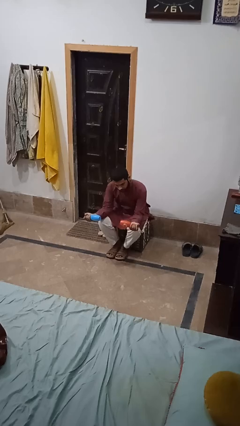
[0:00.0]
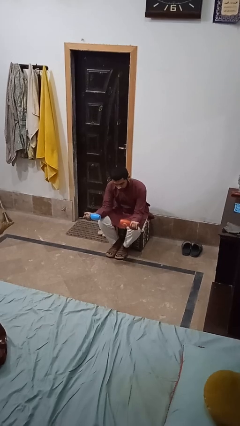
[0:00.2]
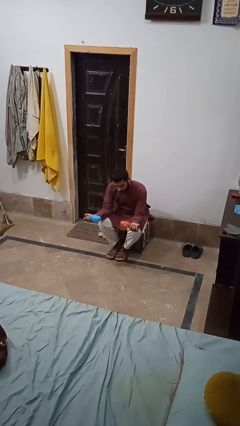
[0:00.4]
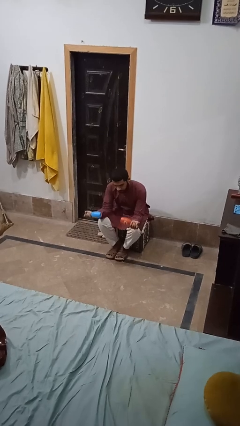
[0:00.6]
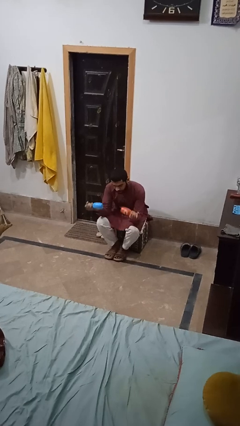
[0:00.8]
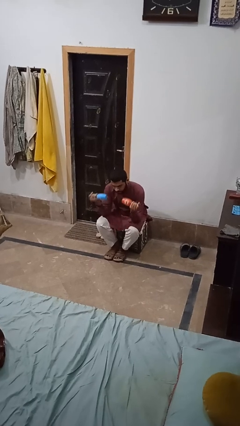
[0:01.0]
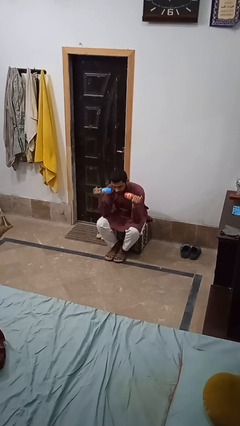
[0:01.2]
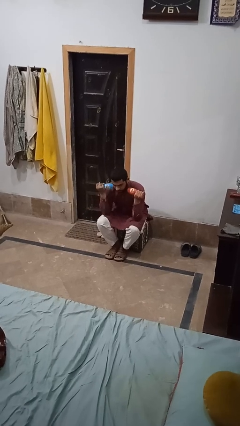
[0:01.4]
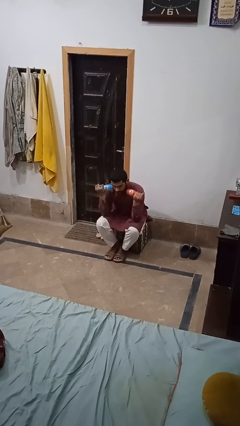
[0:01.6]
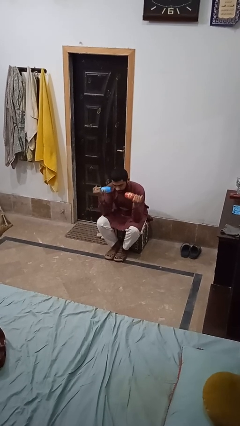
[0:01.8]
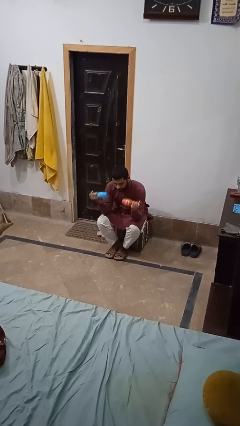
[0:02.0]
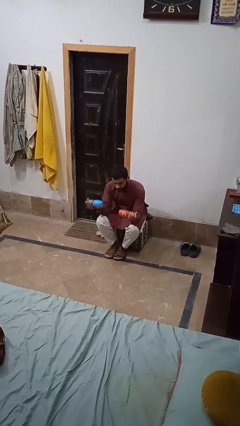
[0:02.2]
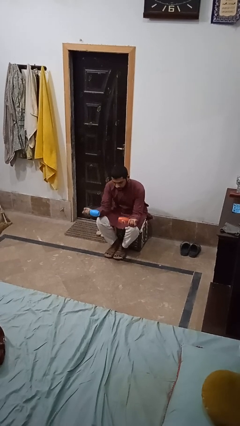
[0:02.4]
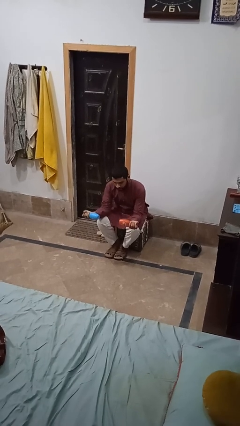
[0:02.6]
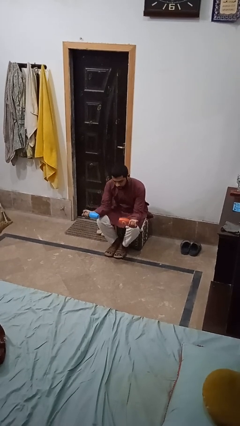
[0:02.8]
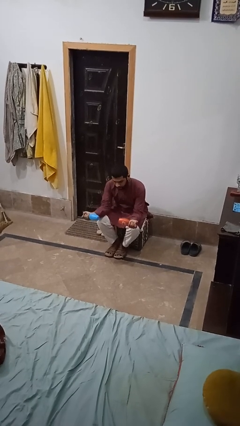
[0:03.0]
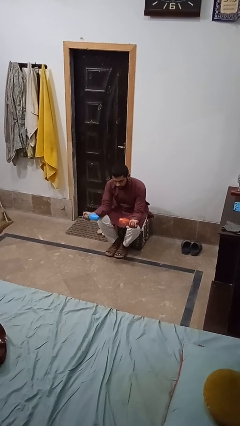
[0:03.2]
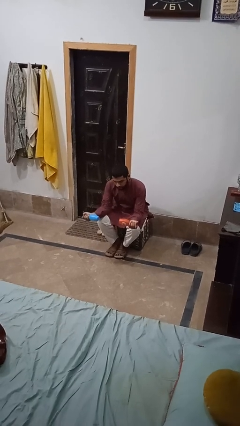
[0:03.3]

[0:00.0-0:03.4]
person lifts dumbbells

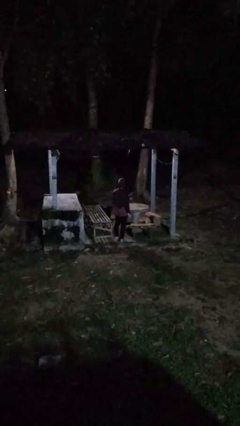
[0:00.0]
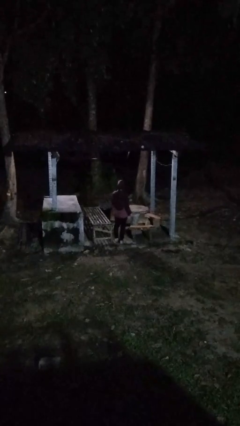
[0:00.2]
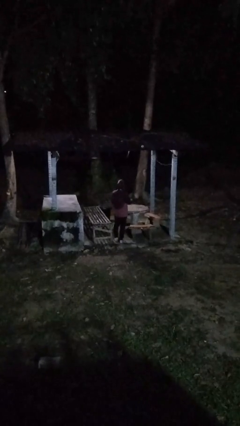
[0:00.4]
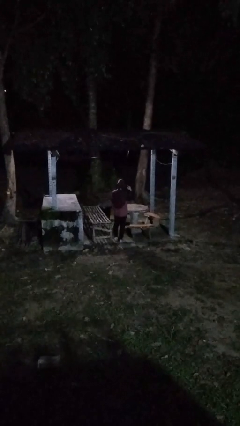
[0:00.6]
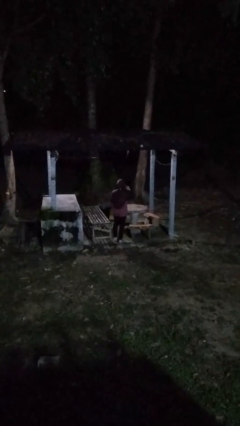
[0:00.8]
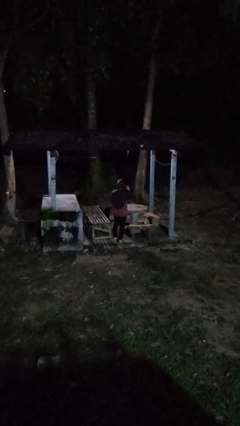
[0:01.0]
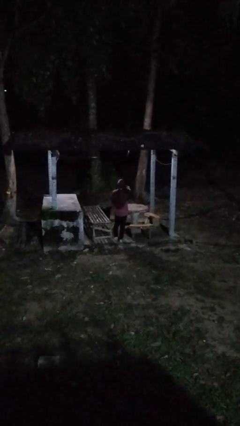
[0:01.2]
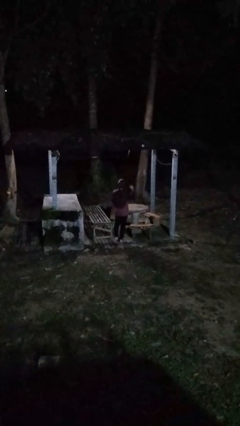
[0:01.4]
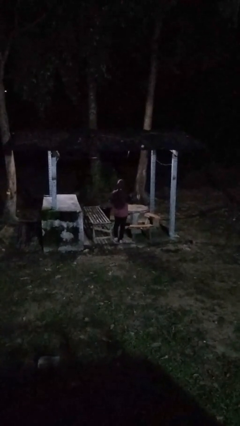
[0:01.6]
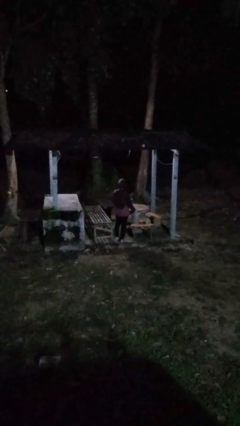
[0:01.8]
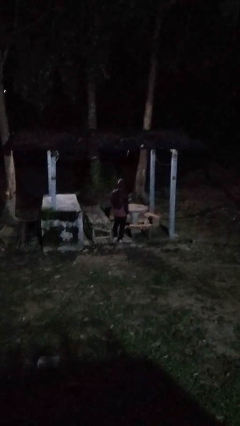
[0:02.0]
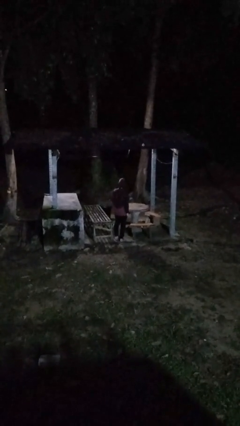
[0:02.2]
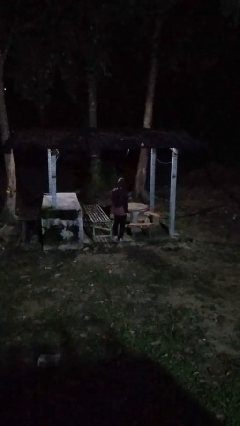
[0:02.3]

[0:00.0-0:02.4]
person gestures listen closely

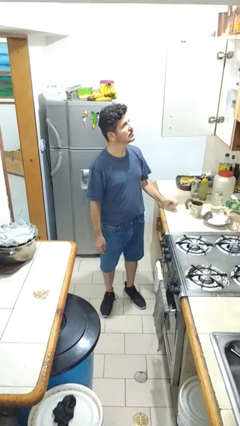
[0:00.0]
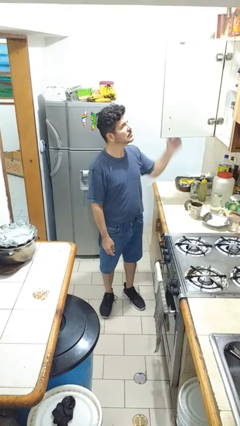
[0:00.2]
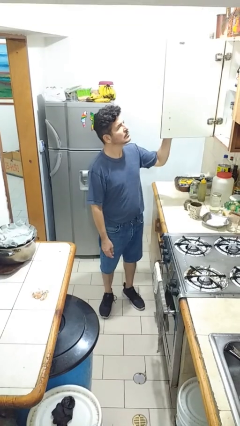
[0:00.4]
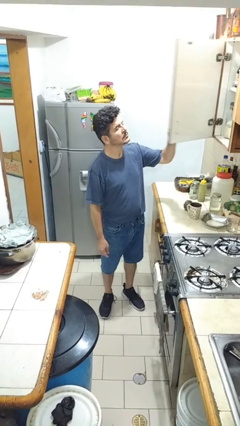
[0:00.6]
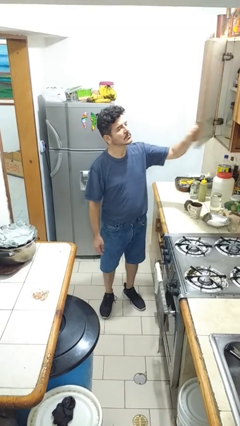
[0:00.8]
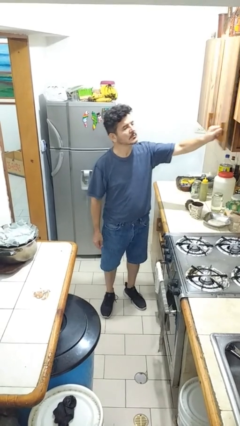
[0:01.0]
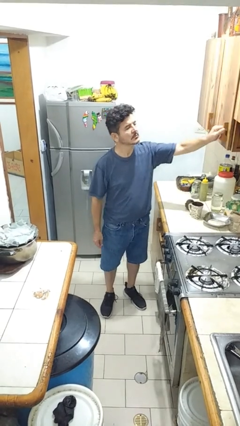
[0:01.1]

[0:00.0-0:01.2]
person closes cabinet

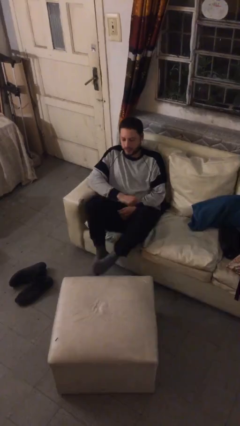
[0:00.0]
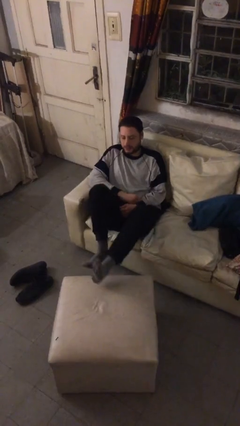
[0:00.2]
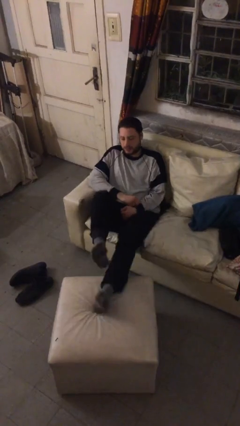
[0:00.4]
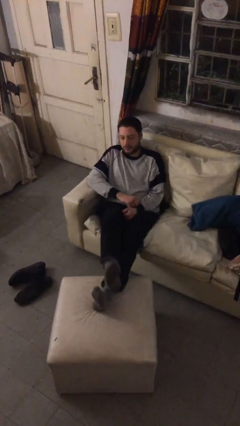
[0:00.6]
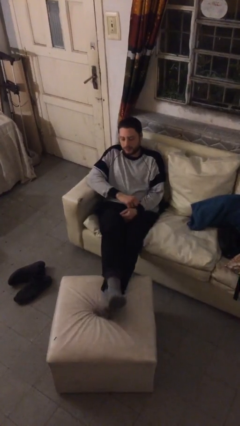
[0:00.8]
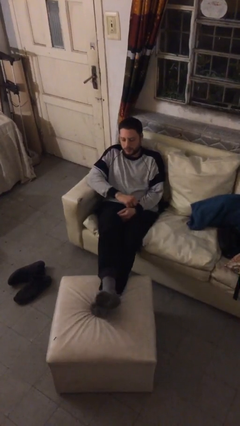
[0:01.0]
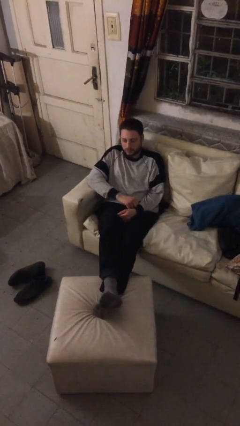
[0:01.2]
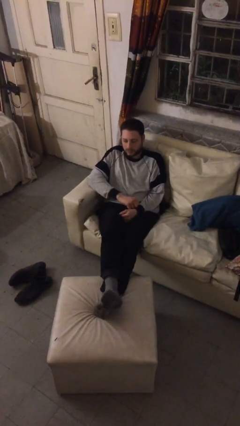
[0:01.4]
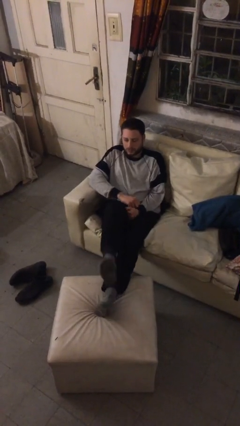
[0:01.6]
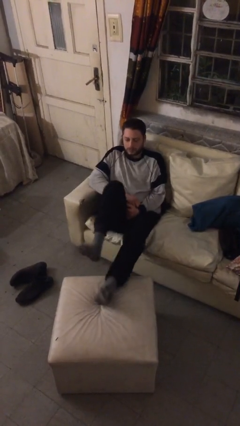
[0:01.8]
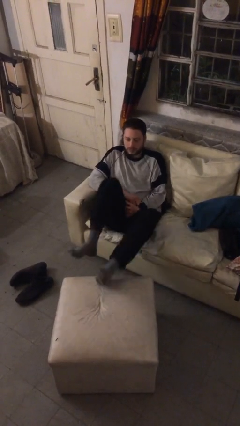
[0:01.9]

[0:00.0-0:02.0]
person puts feet up

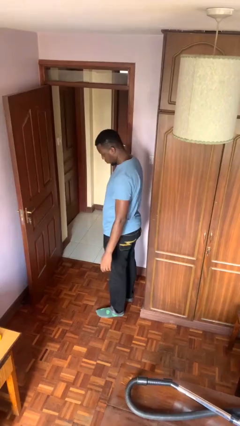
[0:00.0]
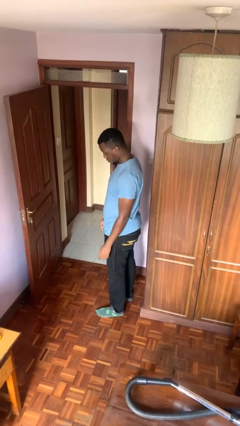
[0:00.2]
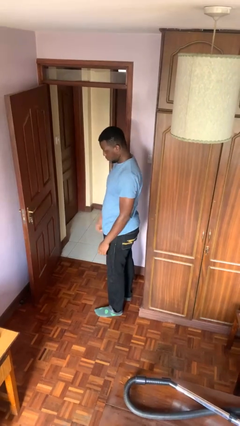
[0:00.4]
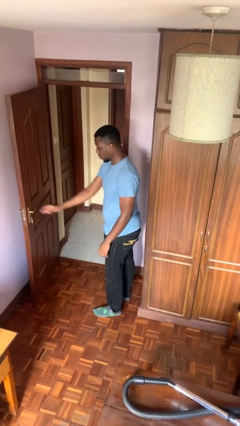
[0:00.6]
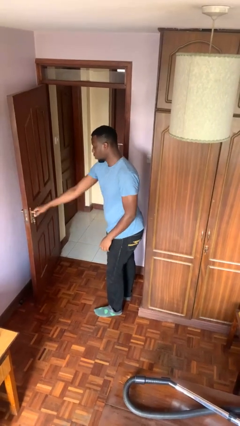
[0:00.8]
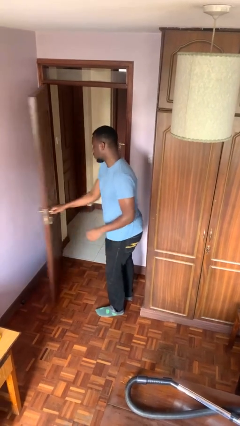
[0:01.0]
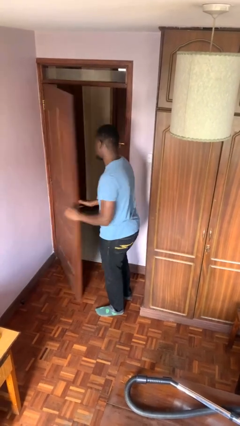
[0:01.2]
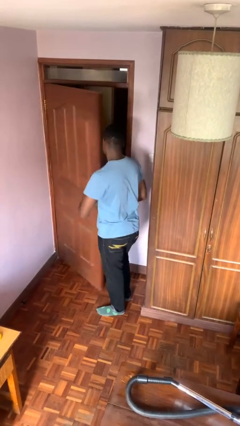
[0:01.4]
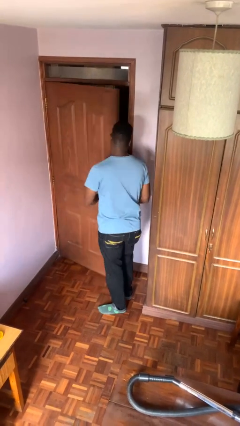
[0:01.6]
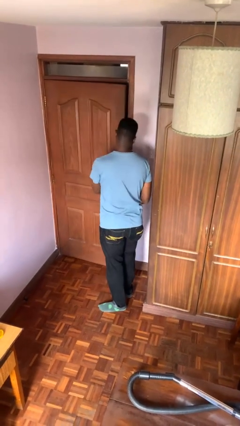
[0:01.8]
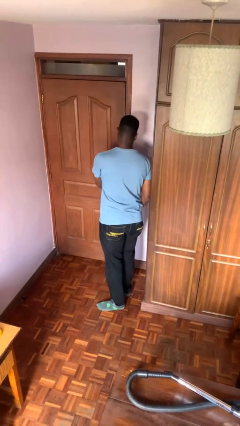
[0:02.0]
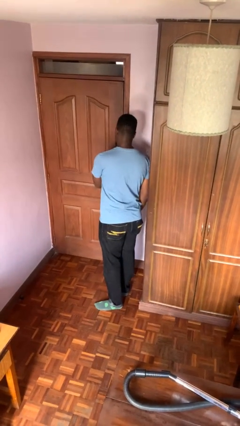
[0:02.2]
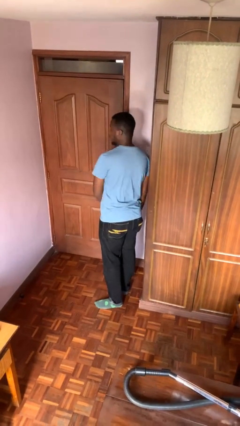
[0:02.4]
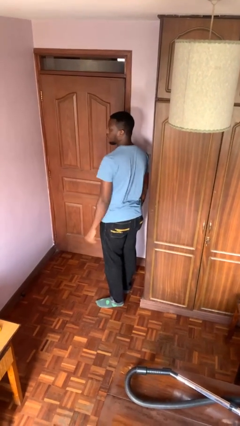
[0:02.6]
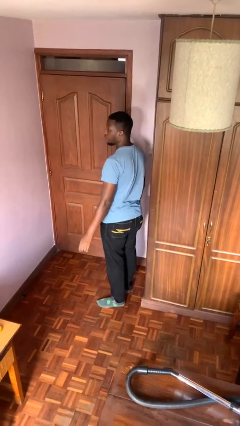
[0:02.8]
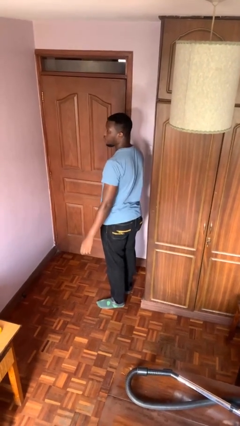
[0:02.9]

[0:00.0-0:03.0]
person closes facility door

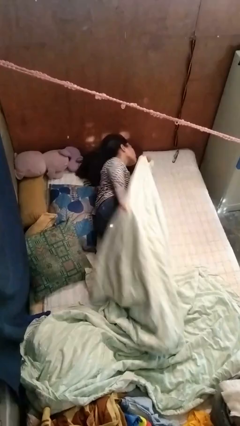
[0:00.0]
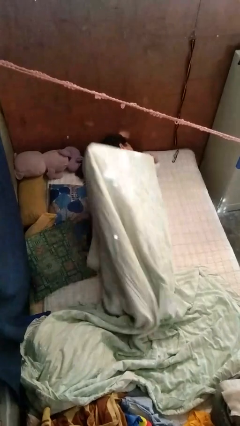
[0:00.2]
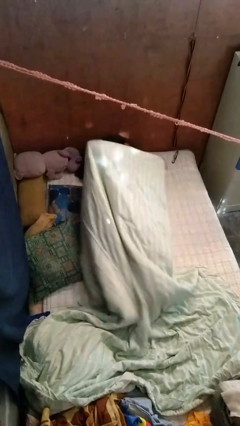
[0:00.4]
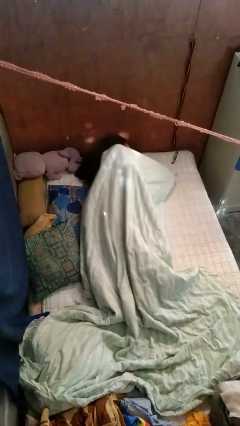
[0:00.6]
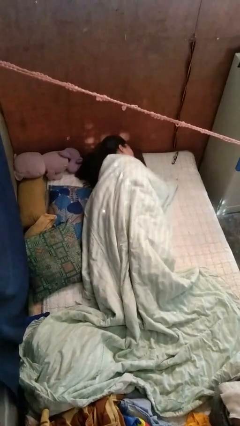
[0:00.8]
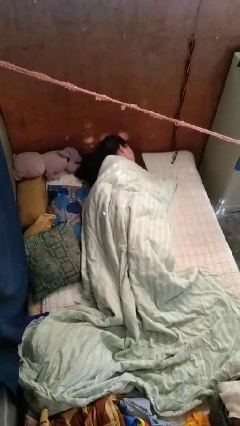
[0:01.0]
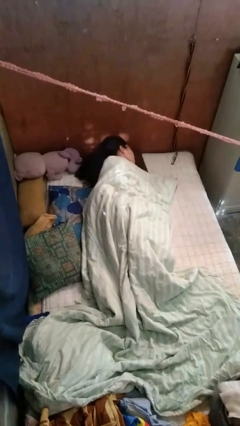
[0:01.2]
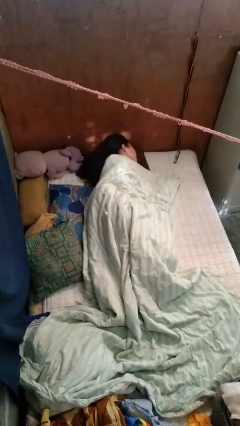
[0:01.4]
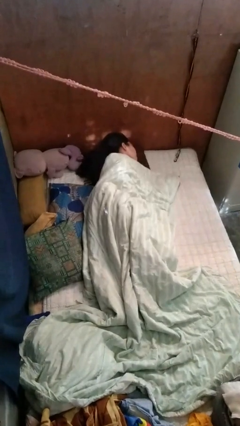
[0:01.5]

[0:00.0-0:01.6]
person covers with bedsheets

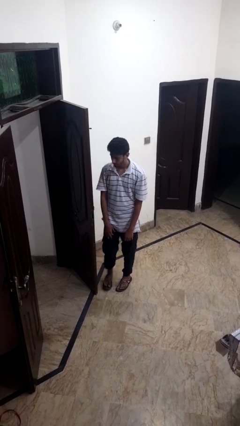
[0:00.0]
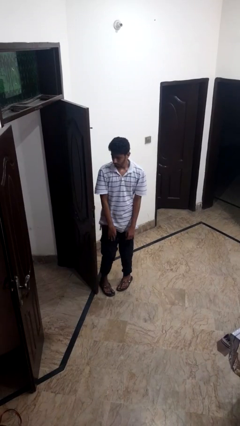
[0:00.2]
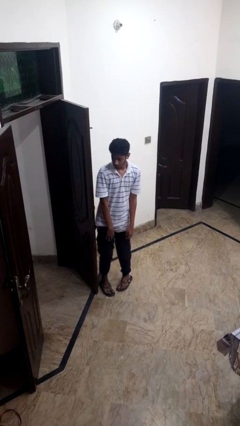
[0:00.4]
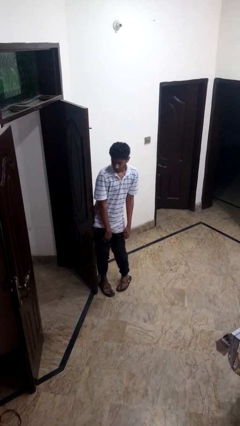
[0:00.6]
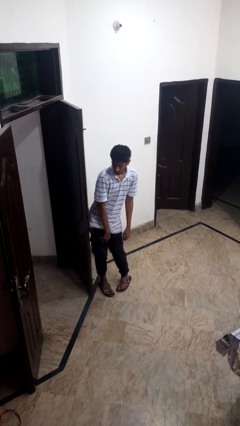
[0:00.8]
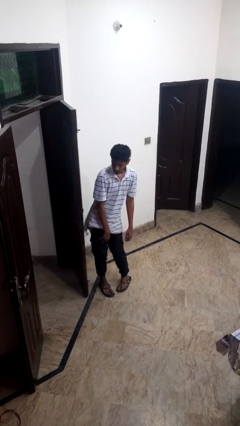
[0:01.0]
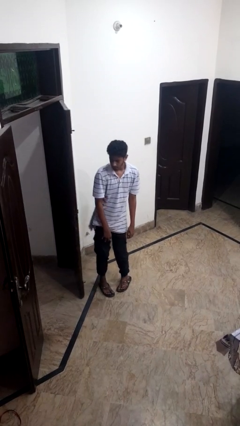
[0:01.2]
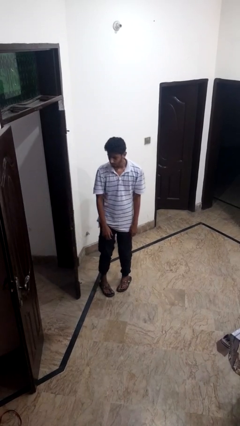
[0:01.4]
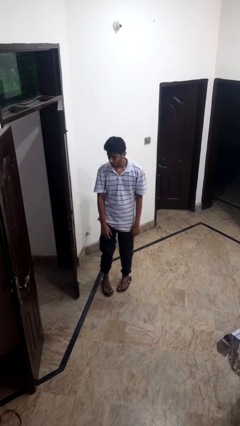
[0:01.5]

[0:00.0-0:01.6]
person closes door with hip

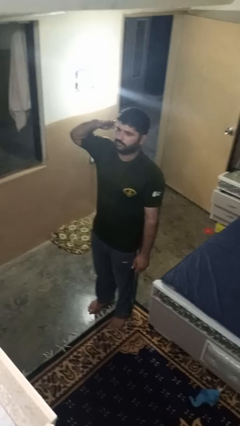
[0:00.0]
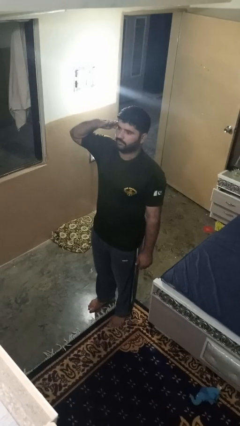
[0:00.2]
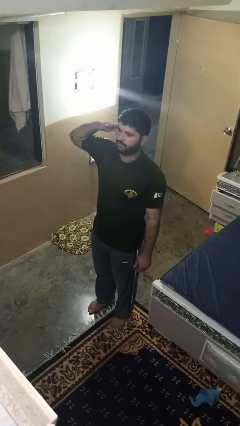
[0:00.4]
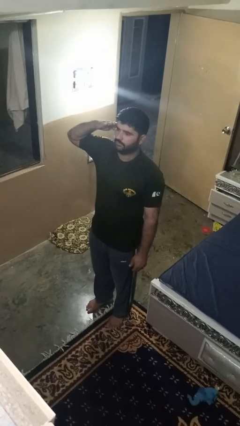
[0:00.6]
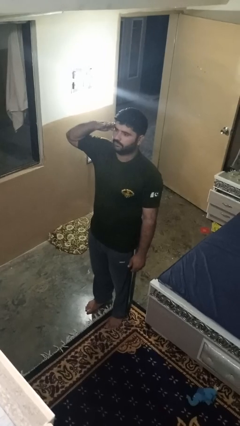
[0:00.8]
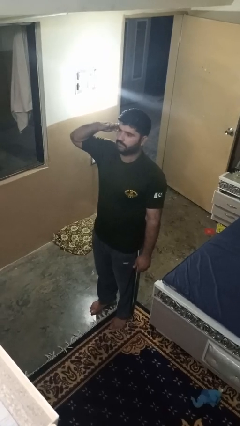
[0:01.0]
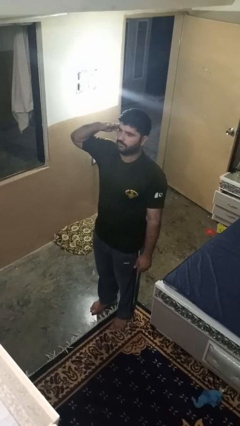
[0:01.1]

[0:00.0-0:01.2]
person salutes

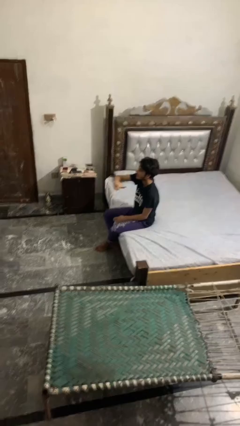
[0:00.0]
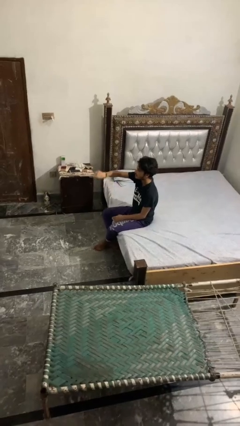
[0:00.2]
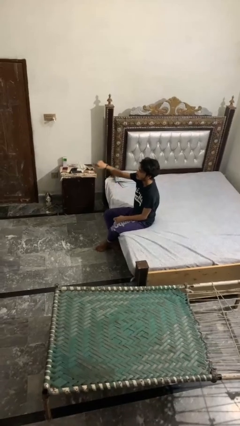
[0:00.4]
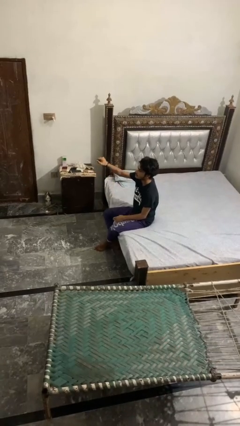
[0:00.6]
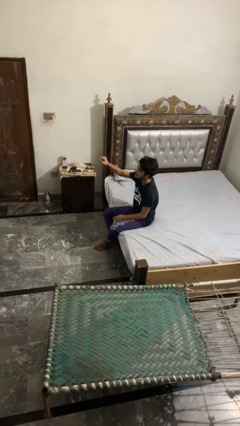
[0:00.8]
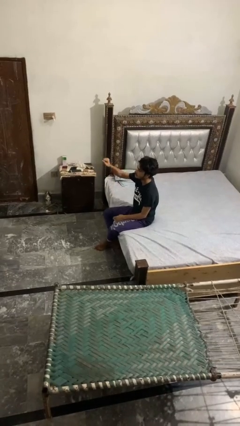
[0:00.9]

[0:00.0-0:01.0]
person gestures swipe right
